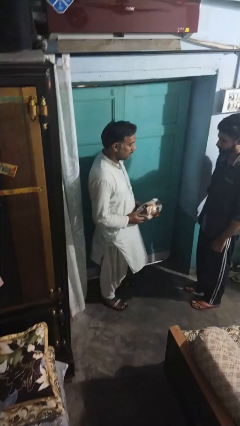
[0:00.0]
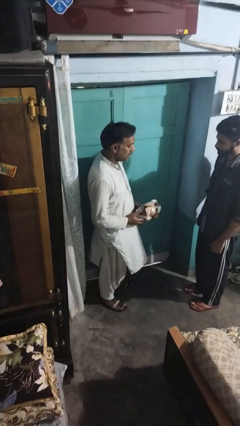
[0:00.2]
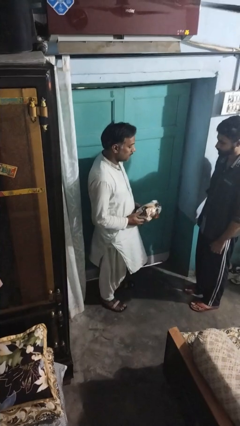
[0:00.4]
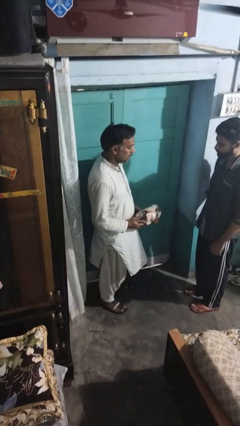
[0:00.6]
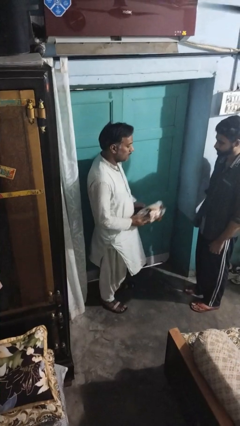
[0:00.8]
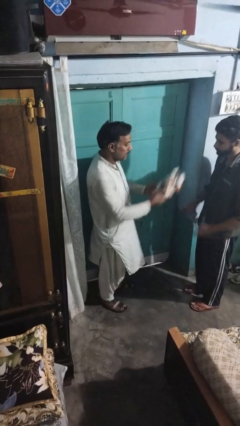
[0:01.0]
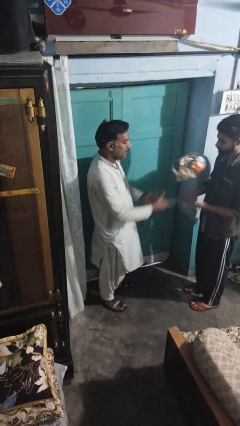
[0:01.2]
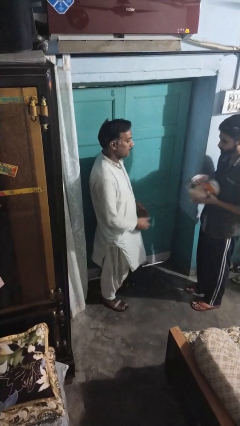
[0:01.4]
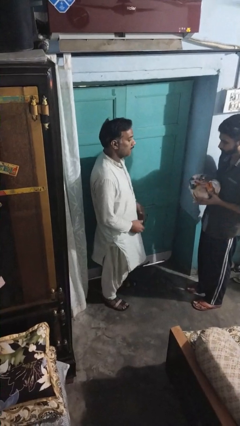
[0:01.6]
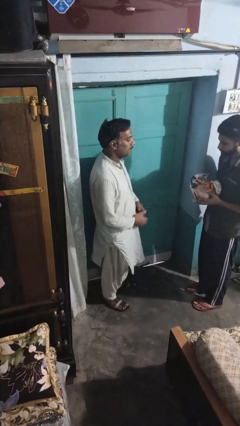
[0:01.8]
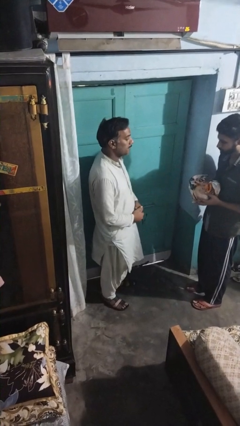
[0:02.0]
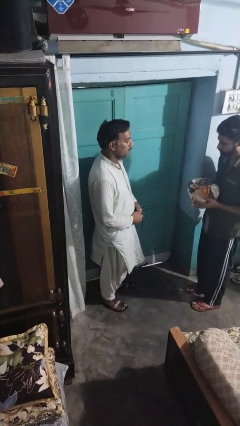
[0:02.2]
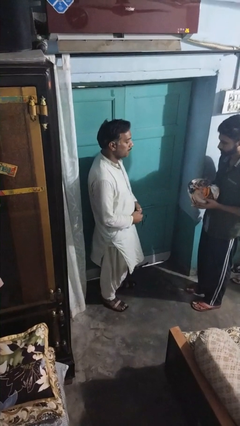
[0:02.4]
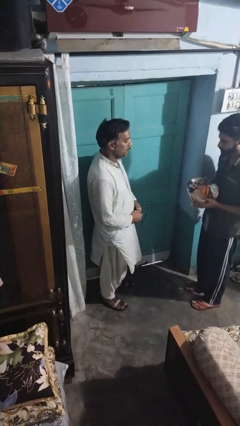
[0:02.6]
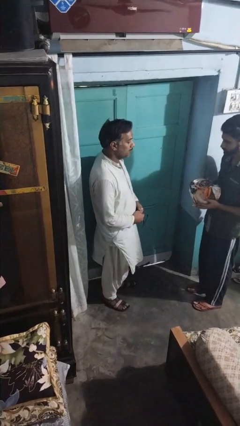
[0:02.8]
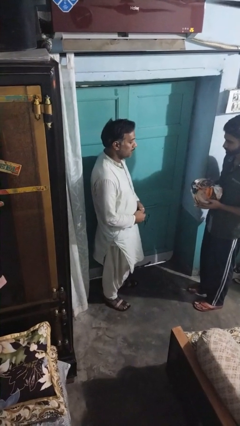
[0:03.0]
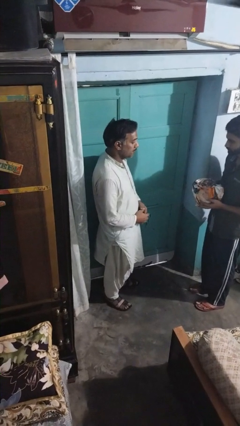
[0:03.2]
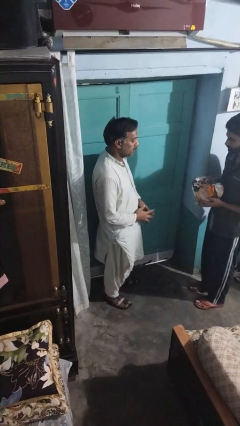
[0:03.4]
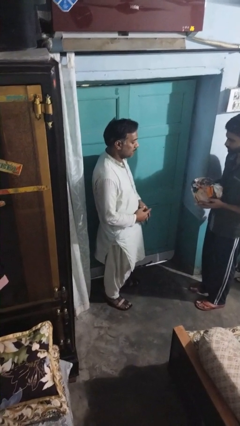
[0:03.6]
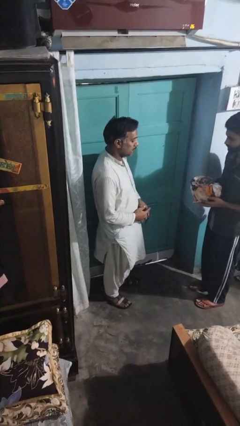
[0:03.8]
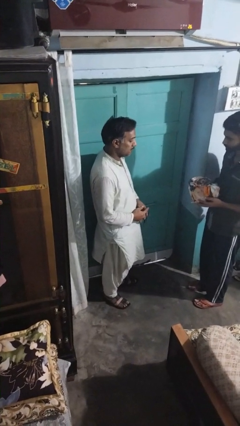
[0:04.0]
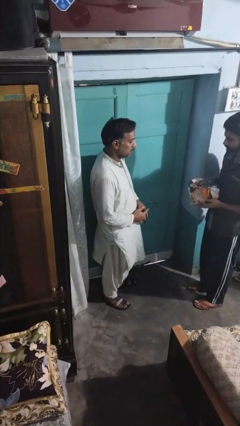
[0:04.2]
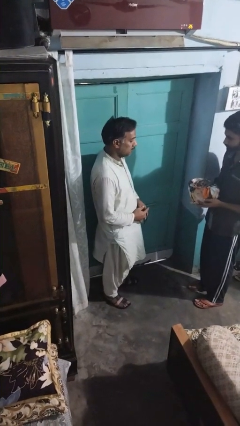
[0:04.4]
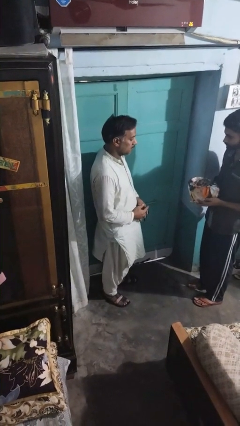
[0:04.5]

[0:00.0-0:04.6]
person throws object to person

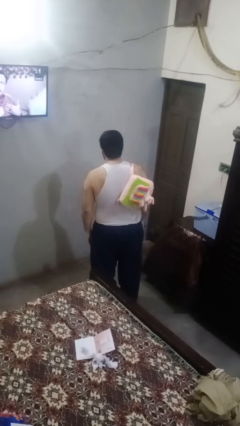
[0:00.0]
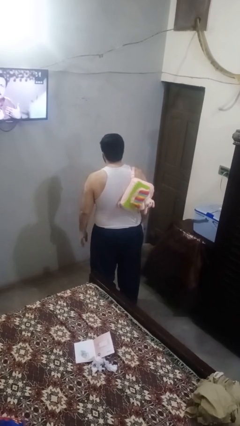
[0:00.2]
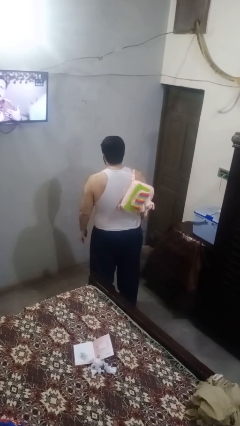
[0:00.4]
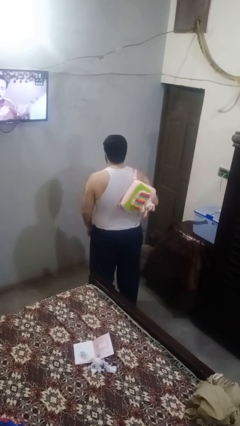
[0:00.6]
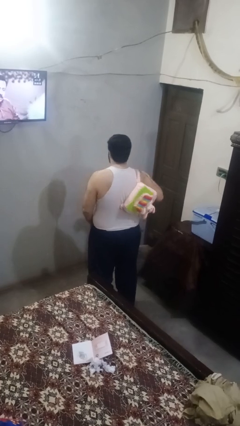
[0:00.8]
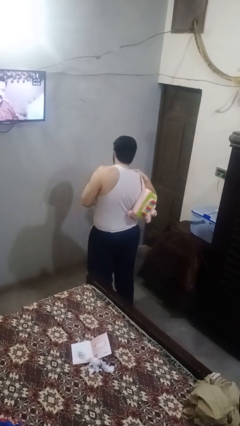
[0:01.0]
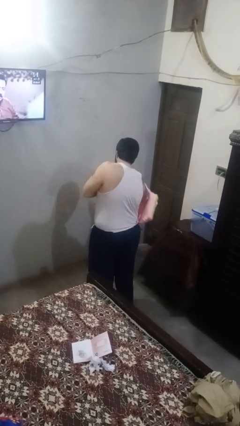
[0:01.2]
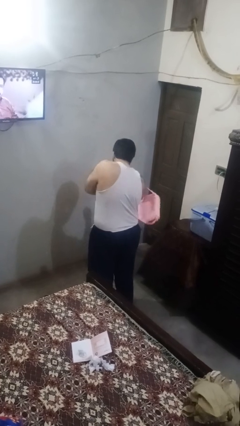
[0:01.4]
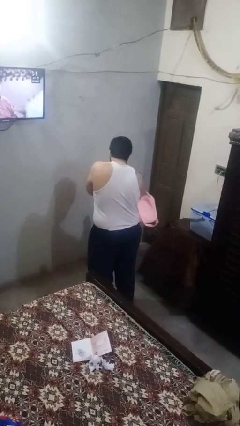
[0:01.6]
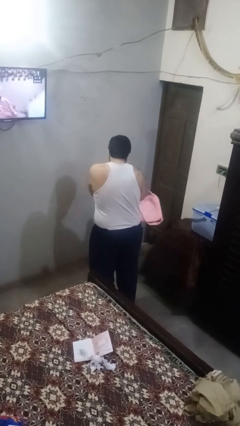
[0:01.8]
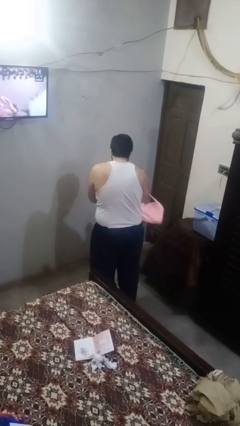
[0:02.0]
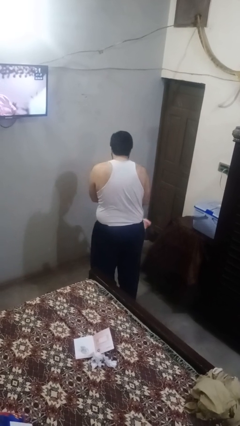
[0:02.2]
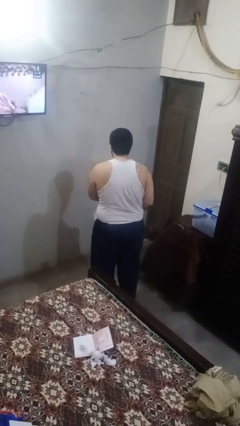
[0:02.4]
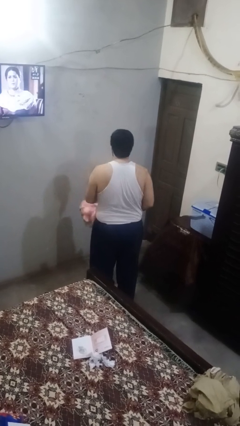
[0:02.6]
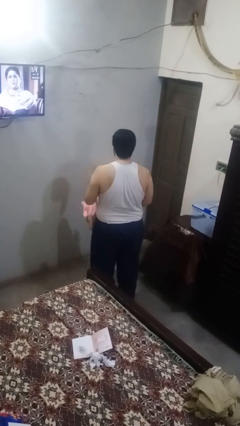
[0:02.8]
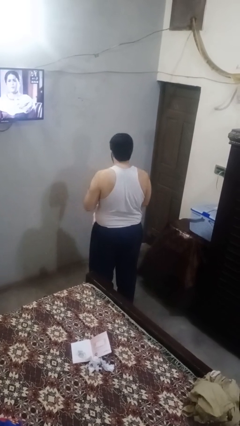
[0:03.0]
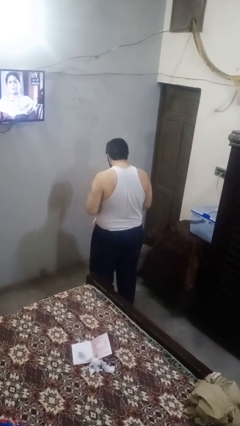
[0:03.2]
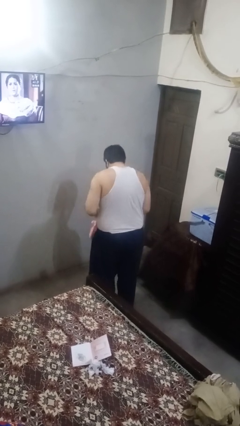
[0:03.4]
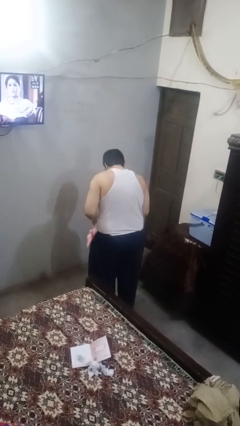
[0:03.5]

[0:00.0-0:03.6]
person takes off backpack

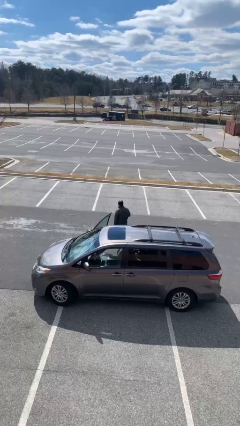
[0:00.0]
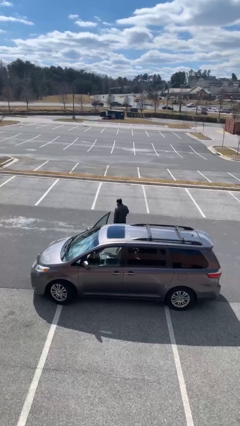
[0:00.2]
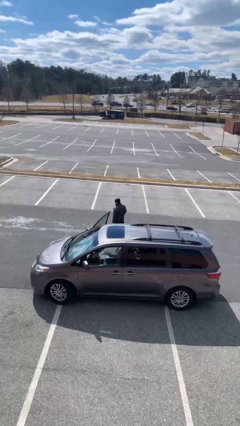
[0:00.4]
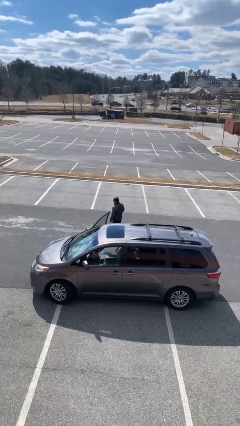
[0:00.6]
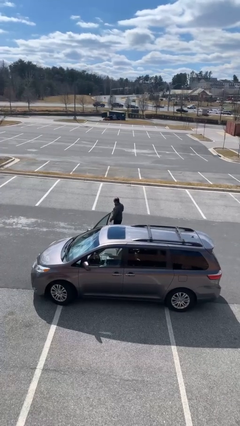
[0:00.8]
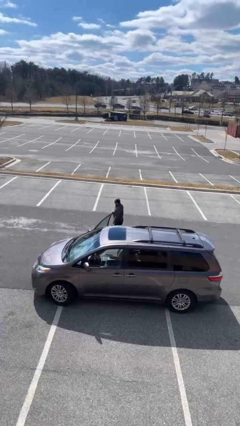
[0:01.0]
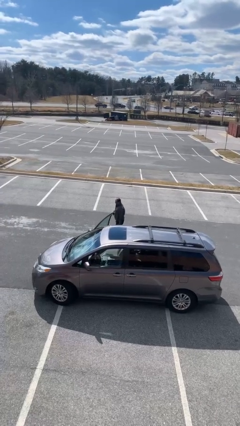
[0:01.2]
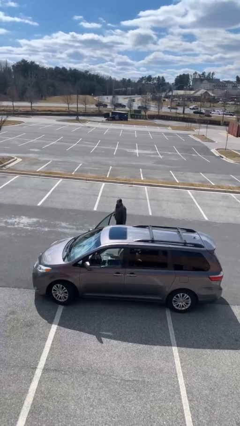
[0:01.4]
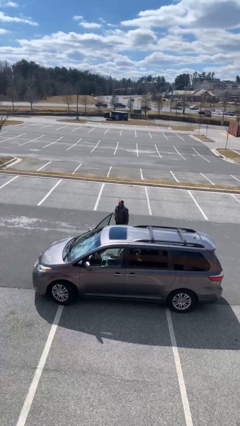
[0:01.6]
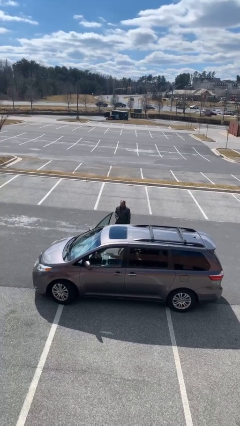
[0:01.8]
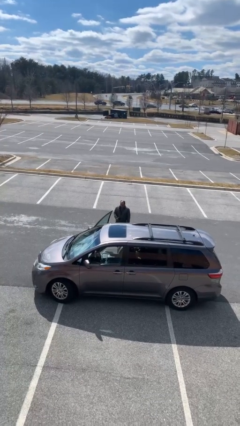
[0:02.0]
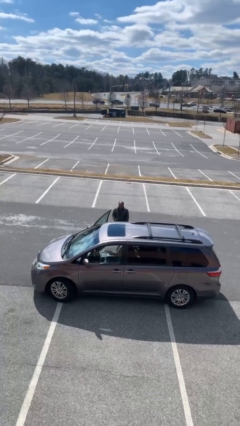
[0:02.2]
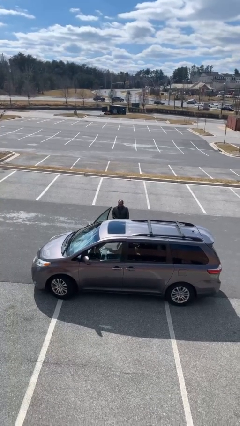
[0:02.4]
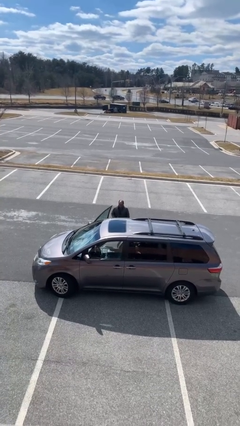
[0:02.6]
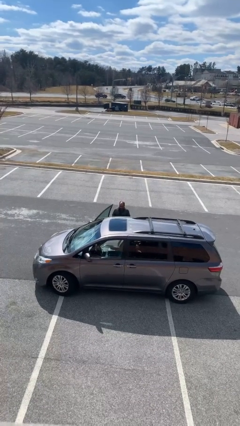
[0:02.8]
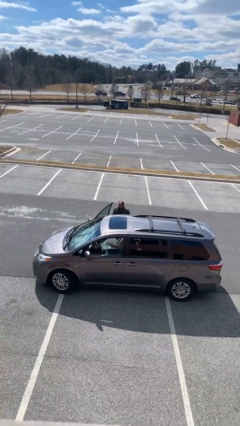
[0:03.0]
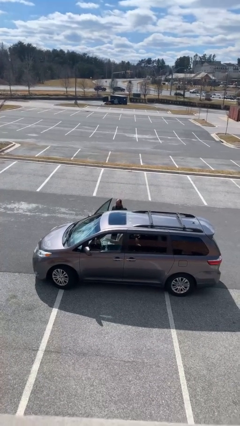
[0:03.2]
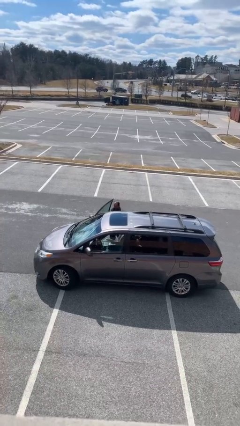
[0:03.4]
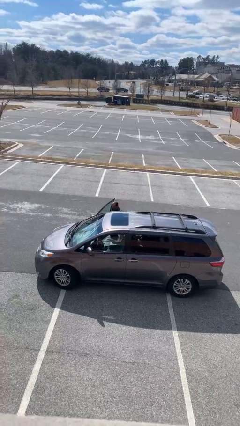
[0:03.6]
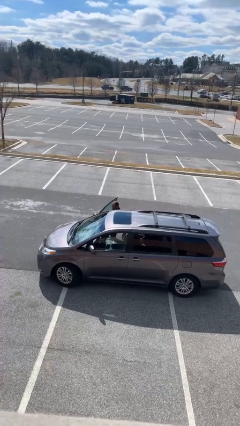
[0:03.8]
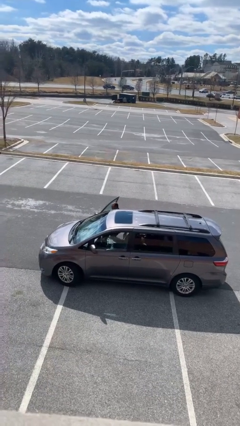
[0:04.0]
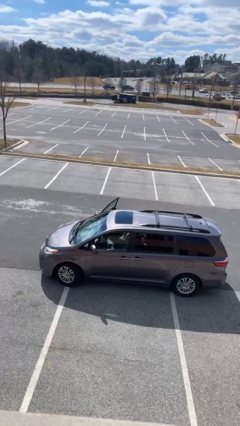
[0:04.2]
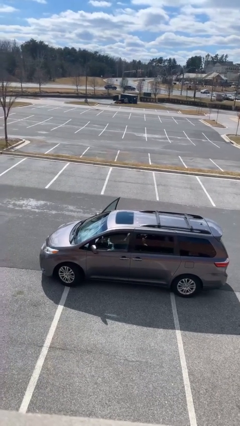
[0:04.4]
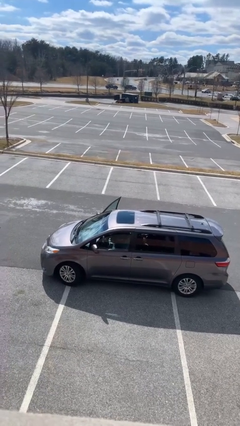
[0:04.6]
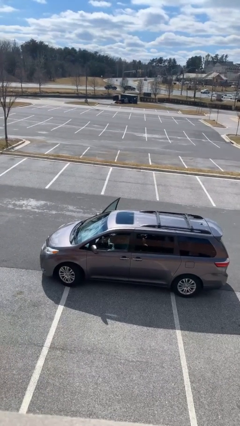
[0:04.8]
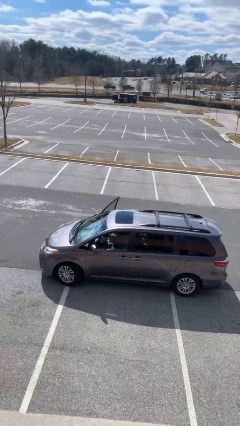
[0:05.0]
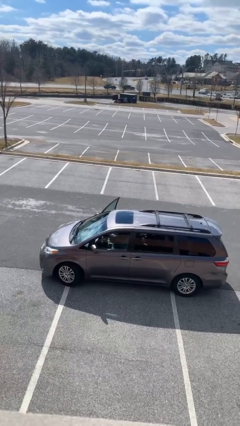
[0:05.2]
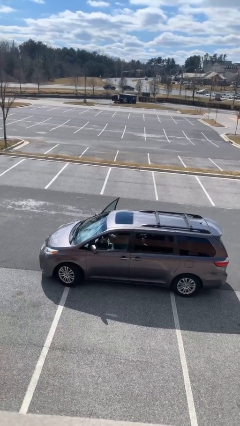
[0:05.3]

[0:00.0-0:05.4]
person enters car

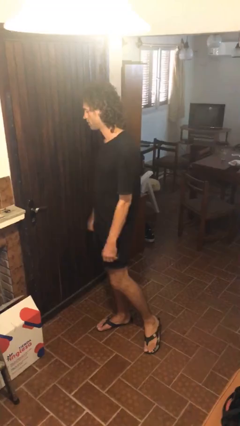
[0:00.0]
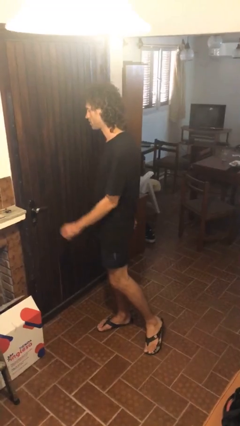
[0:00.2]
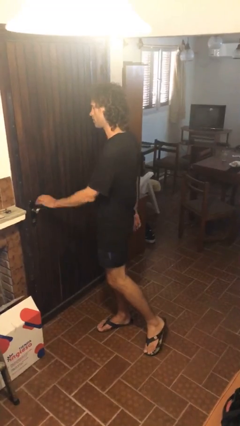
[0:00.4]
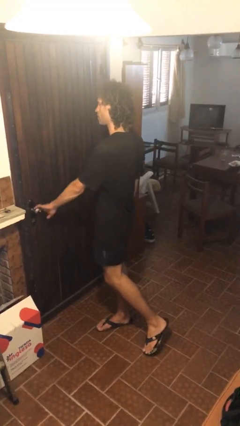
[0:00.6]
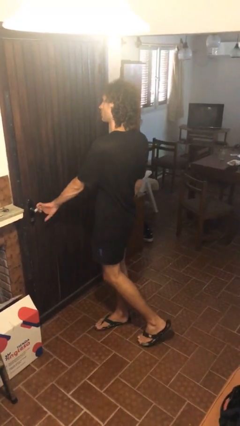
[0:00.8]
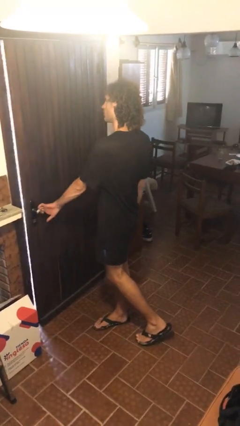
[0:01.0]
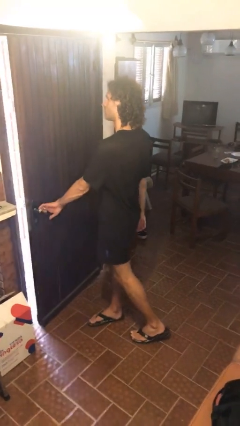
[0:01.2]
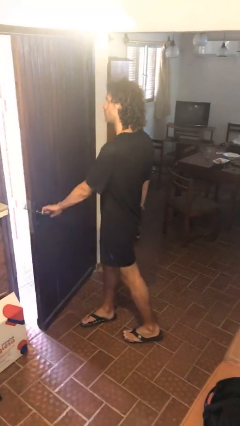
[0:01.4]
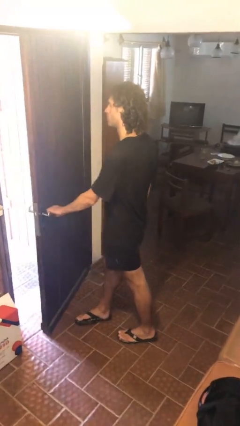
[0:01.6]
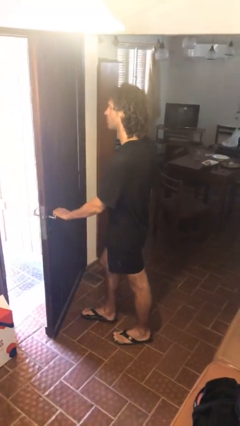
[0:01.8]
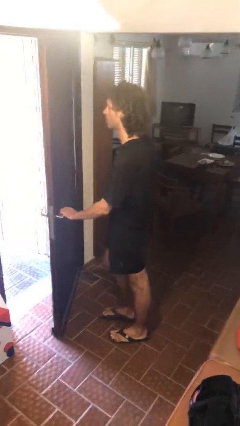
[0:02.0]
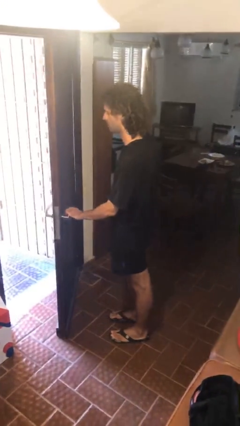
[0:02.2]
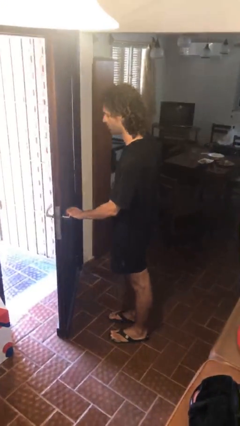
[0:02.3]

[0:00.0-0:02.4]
person opens facility door

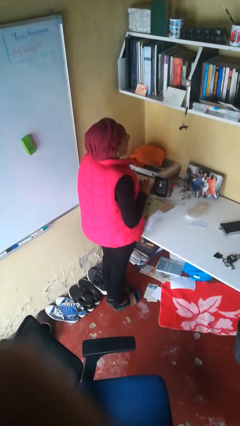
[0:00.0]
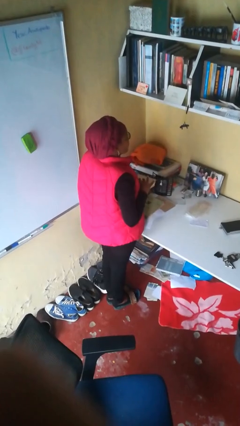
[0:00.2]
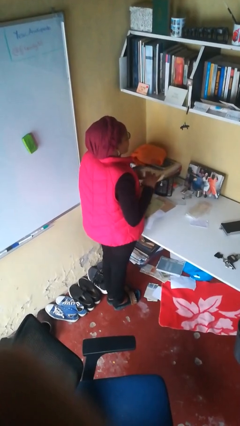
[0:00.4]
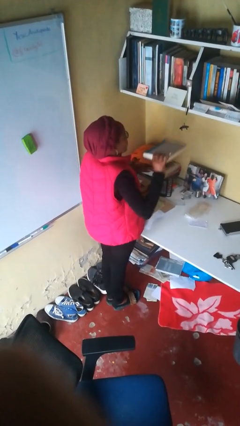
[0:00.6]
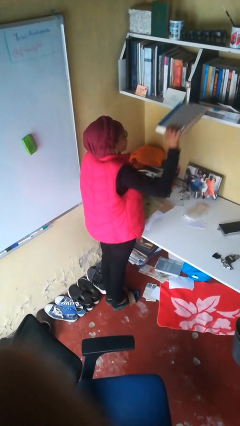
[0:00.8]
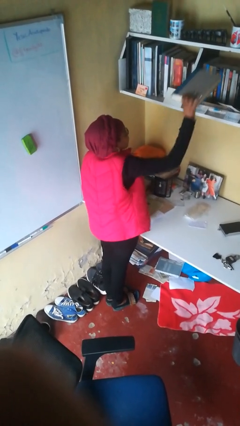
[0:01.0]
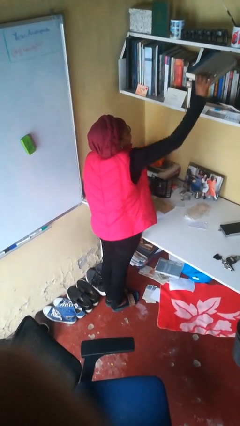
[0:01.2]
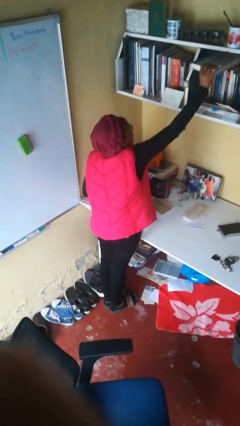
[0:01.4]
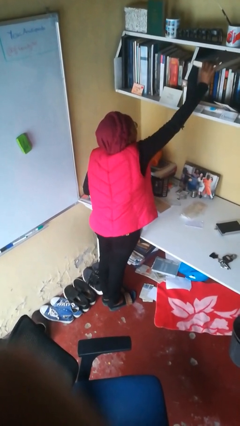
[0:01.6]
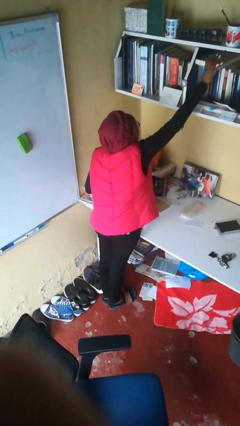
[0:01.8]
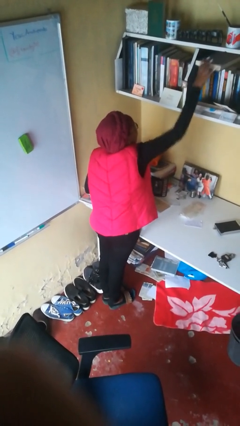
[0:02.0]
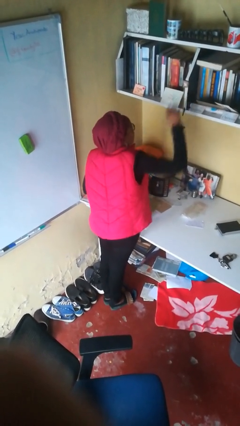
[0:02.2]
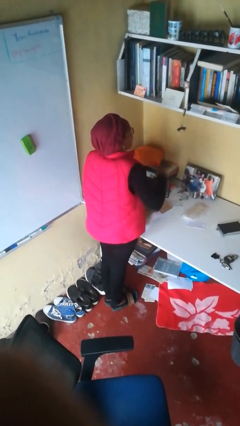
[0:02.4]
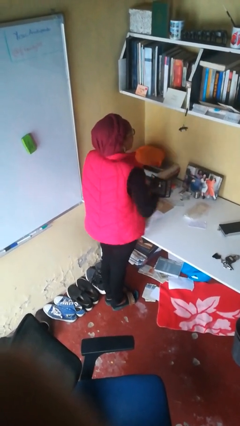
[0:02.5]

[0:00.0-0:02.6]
person puts down object on shelf
